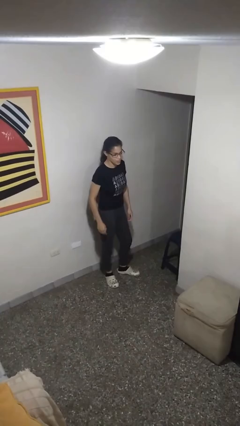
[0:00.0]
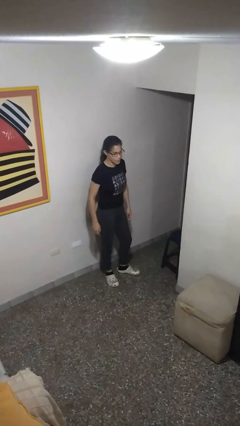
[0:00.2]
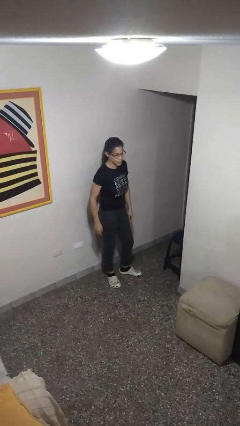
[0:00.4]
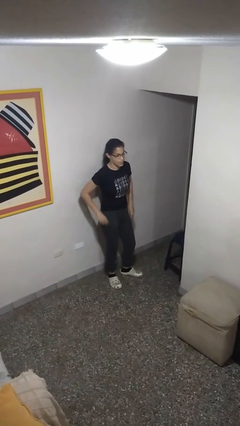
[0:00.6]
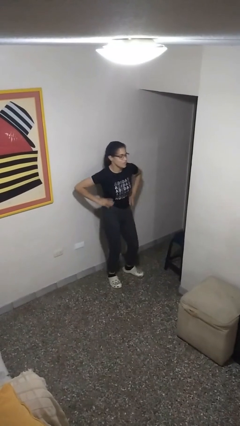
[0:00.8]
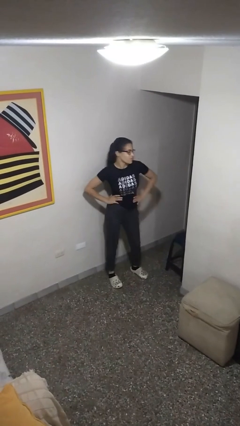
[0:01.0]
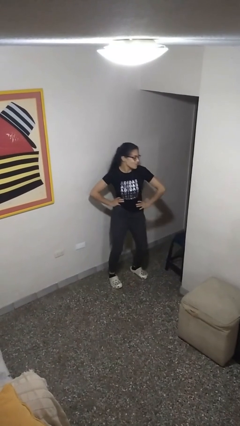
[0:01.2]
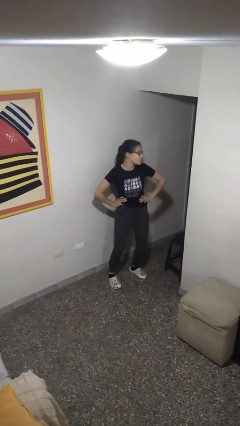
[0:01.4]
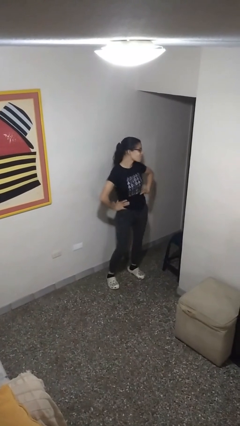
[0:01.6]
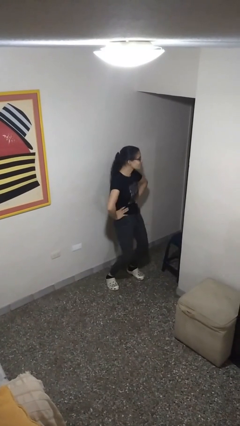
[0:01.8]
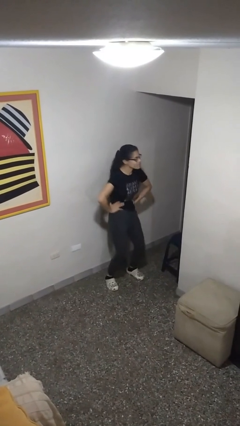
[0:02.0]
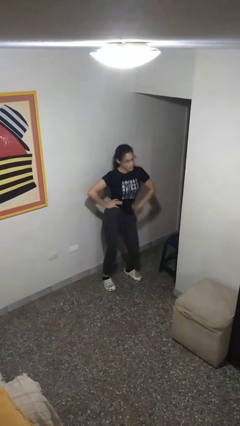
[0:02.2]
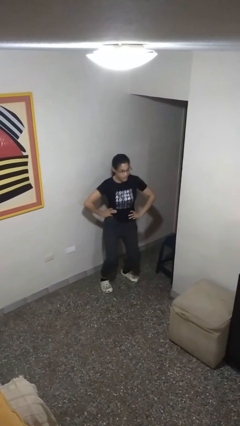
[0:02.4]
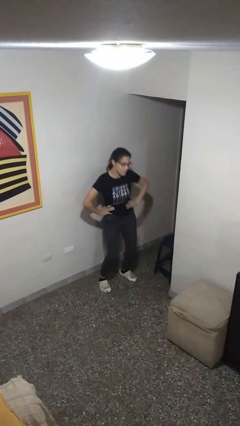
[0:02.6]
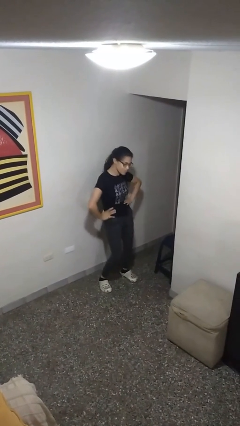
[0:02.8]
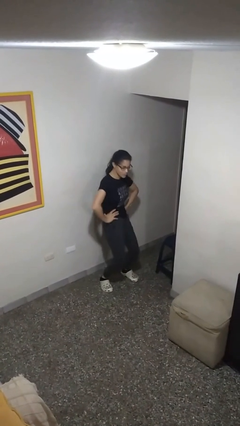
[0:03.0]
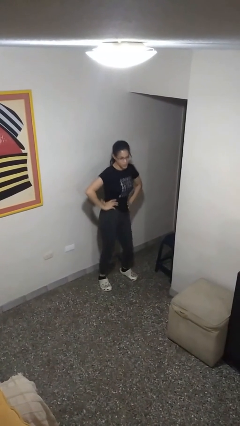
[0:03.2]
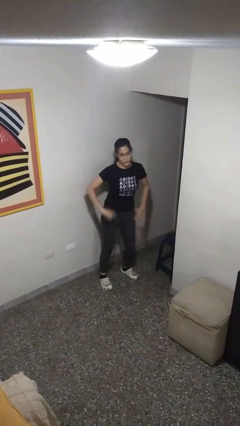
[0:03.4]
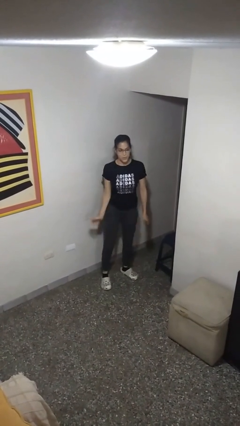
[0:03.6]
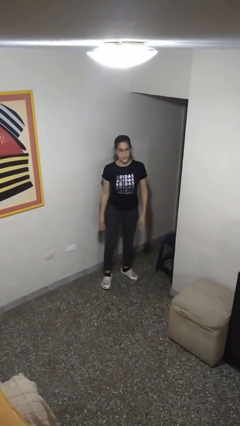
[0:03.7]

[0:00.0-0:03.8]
person dances in place

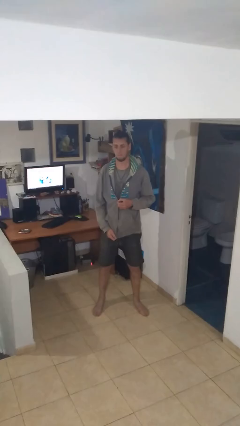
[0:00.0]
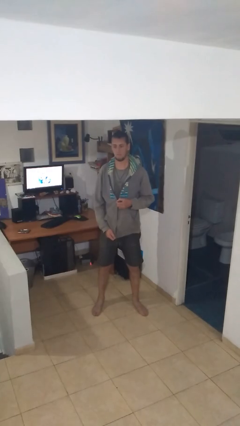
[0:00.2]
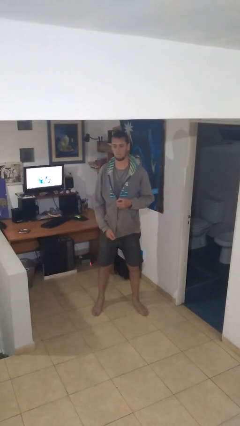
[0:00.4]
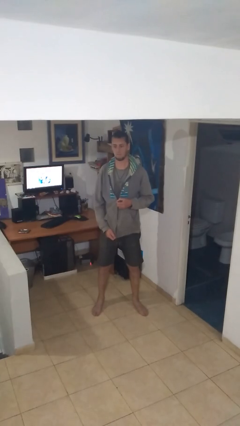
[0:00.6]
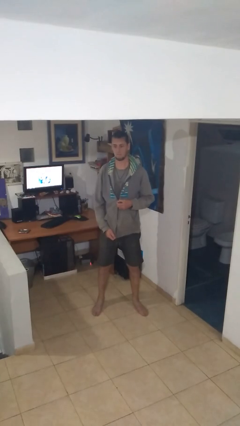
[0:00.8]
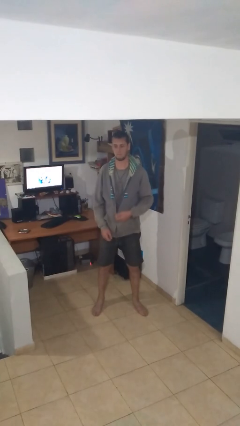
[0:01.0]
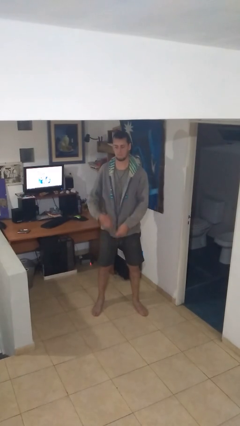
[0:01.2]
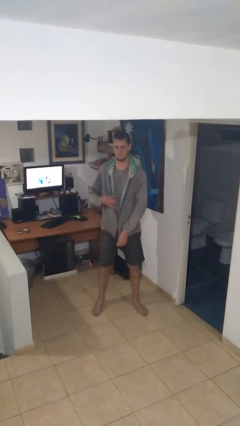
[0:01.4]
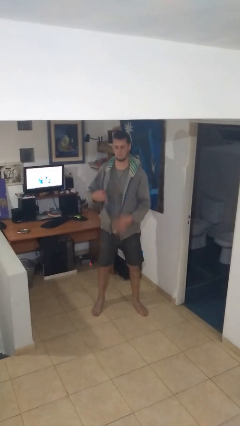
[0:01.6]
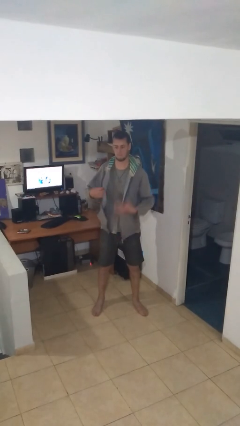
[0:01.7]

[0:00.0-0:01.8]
person unzips jacket

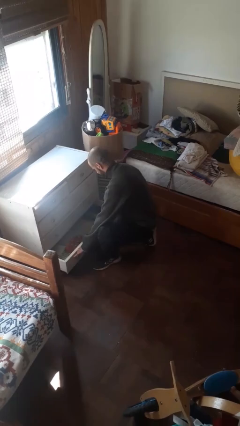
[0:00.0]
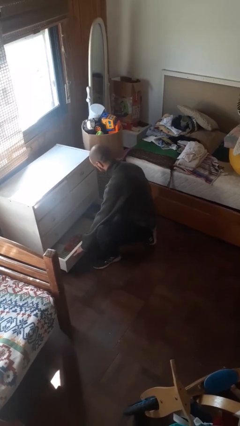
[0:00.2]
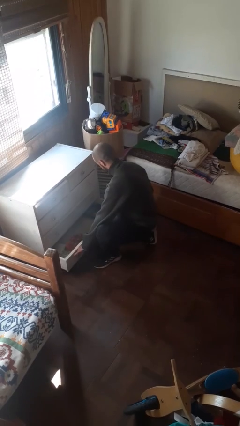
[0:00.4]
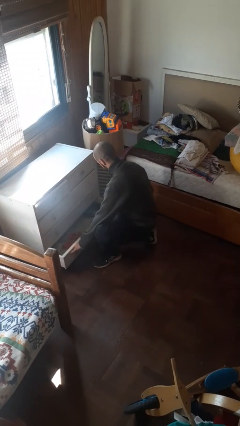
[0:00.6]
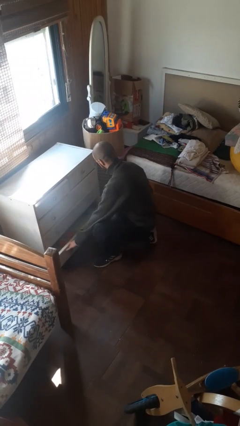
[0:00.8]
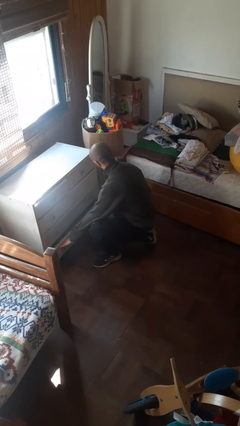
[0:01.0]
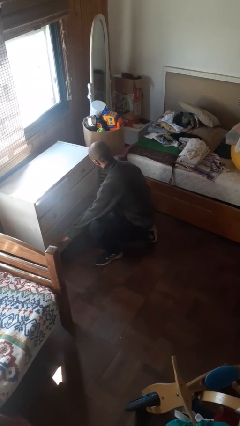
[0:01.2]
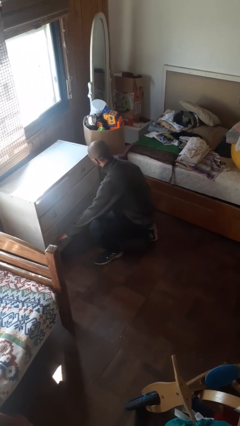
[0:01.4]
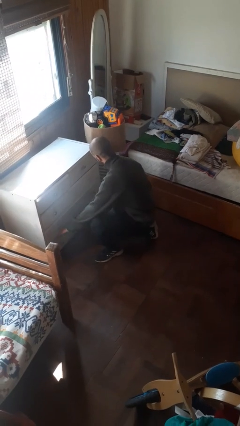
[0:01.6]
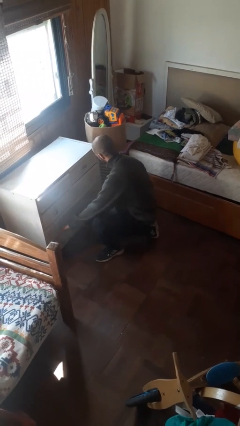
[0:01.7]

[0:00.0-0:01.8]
person closes dresser drawer

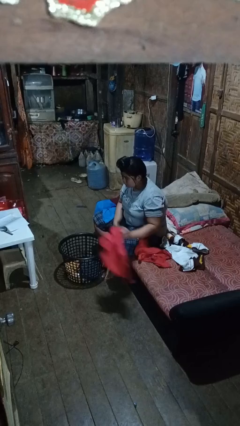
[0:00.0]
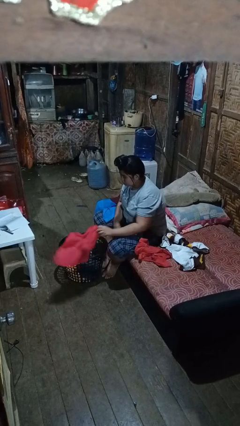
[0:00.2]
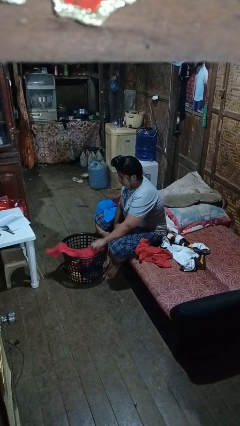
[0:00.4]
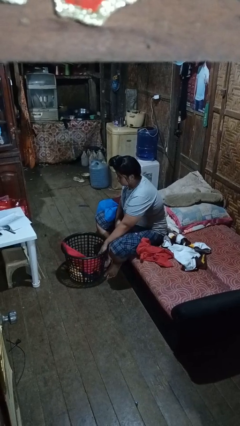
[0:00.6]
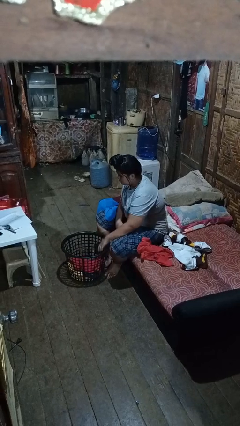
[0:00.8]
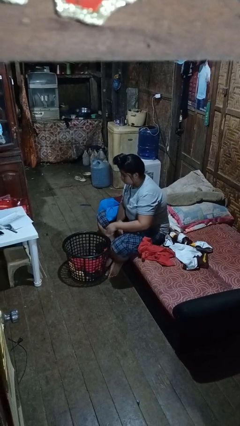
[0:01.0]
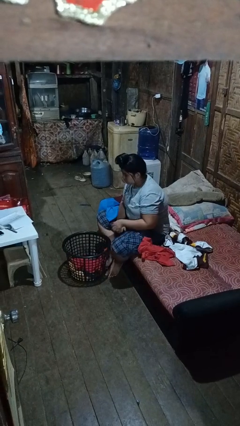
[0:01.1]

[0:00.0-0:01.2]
person puts object into basket

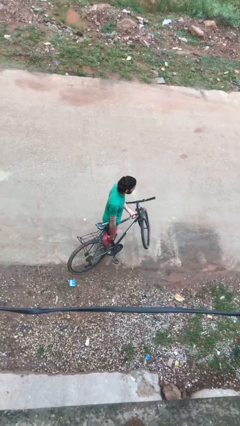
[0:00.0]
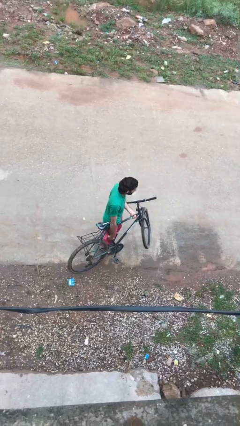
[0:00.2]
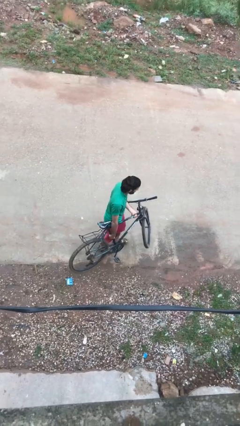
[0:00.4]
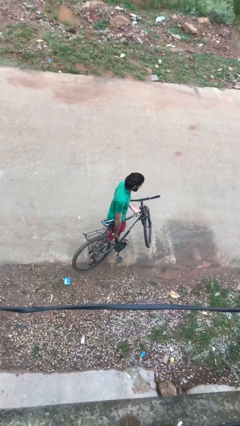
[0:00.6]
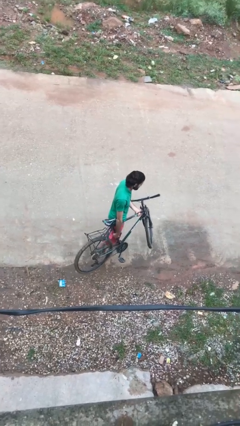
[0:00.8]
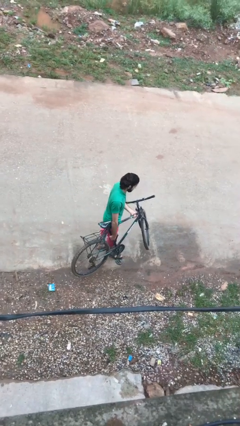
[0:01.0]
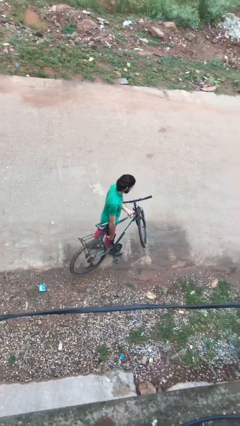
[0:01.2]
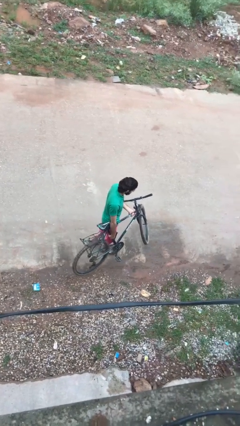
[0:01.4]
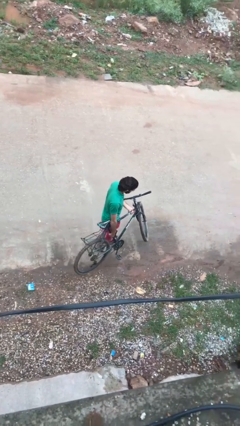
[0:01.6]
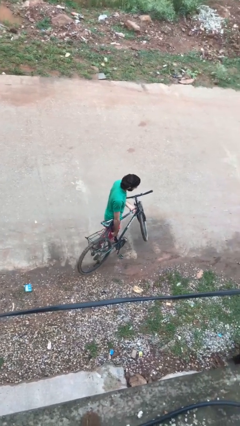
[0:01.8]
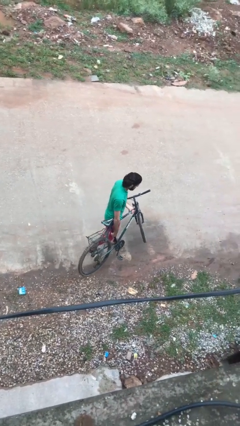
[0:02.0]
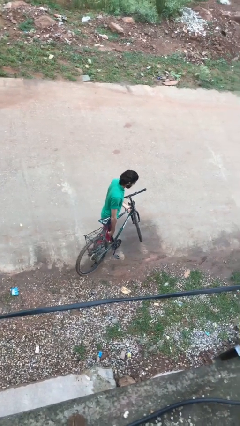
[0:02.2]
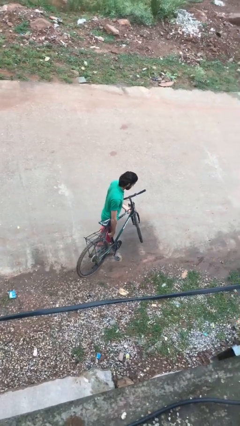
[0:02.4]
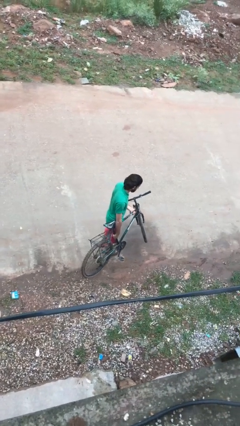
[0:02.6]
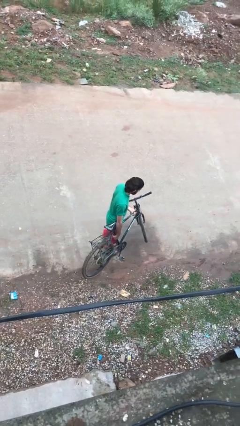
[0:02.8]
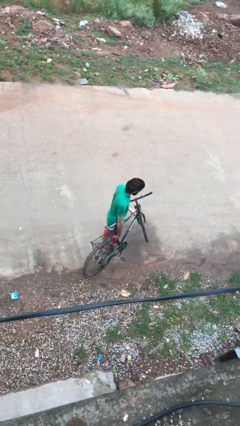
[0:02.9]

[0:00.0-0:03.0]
person carries bicycle

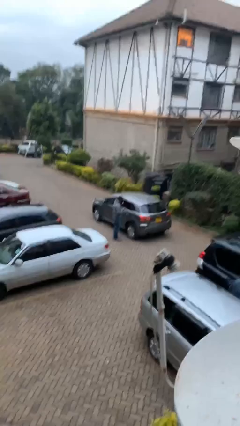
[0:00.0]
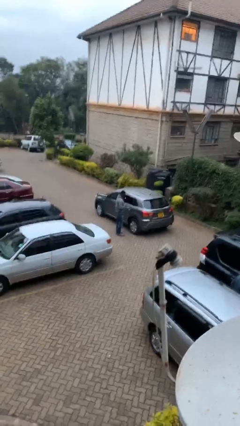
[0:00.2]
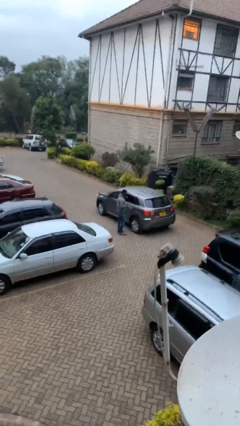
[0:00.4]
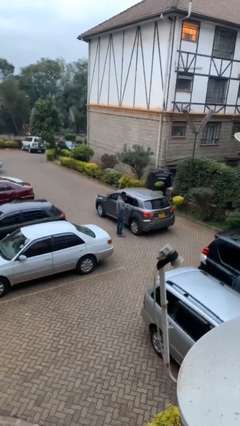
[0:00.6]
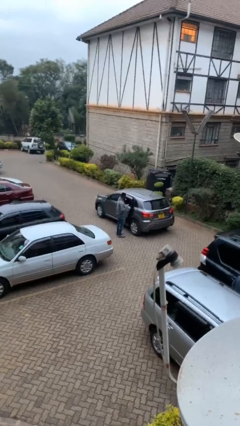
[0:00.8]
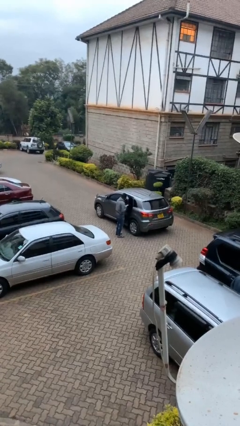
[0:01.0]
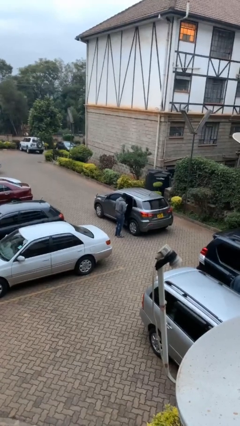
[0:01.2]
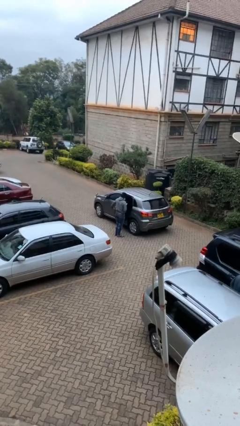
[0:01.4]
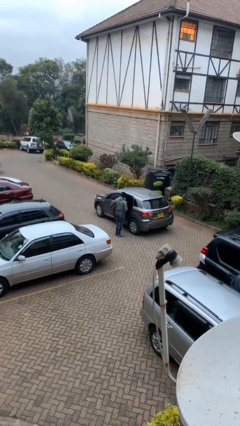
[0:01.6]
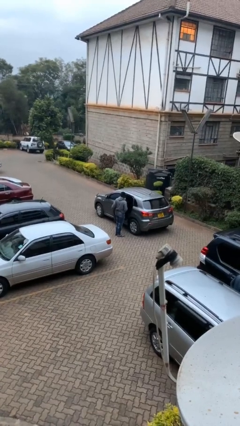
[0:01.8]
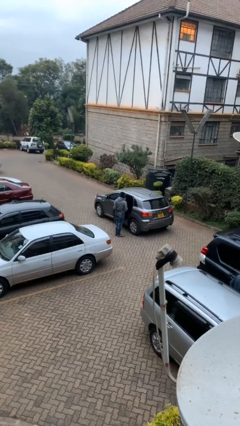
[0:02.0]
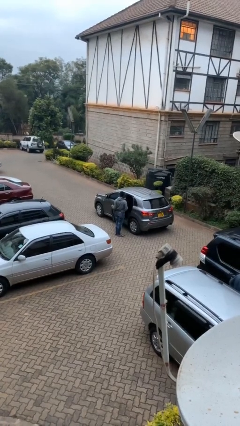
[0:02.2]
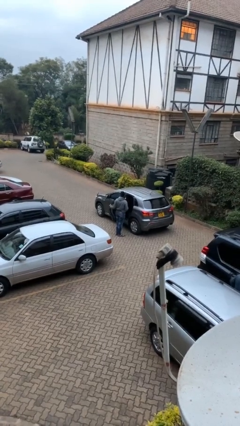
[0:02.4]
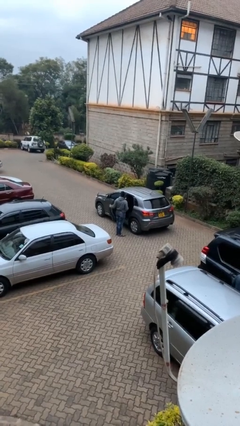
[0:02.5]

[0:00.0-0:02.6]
person opens car door

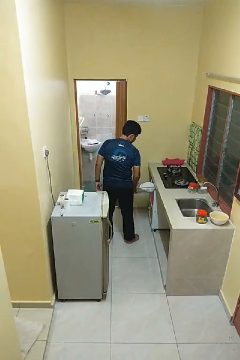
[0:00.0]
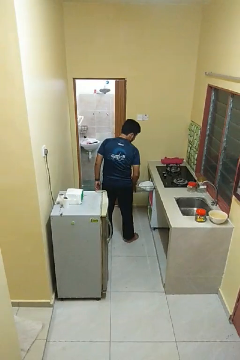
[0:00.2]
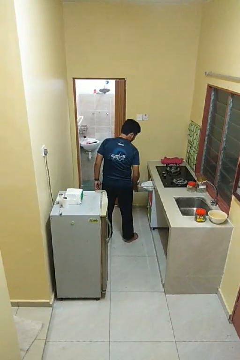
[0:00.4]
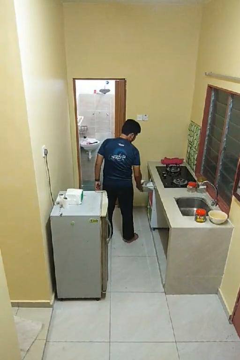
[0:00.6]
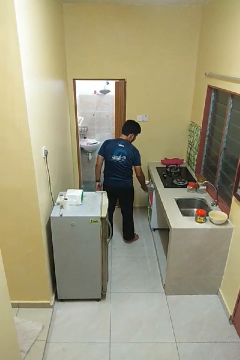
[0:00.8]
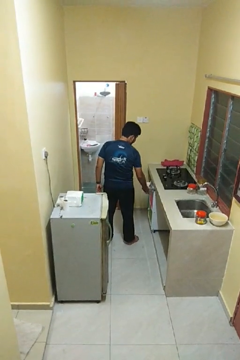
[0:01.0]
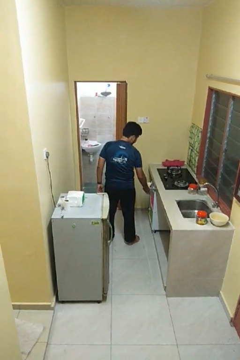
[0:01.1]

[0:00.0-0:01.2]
person closes kitchen drawer

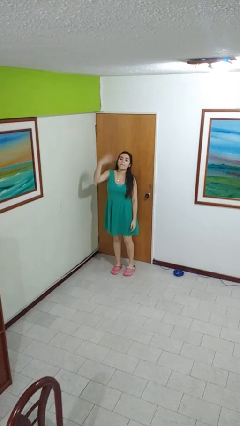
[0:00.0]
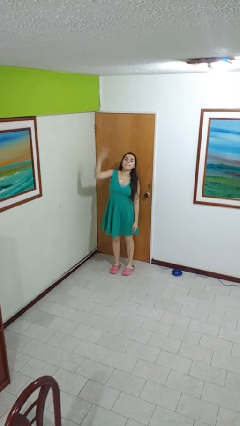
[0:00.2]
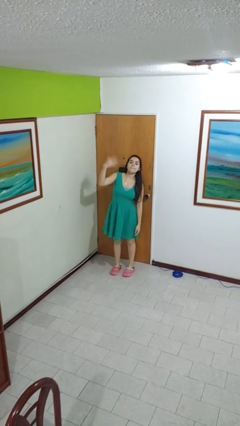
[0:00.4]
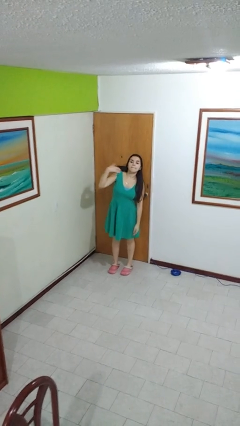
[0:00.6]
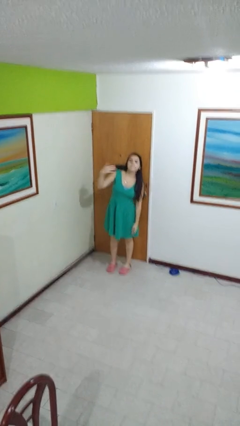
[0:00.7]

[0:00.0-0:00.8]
person gestures come here

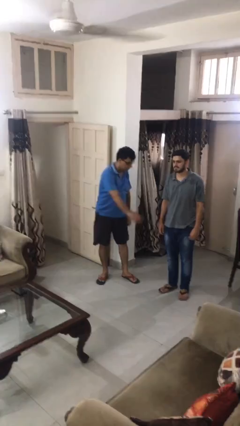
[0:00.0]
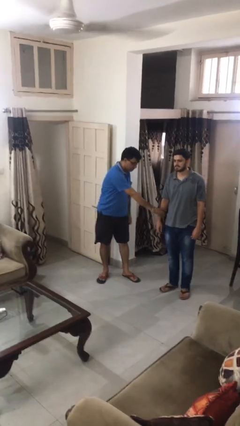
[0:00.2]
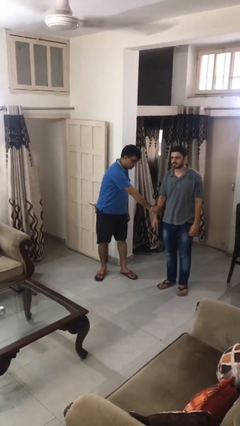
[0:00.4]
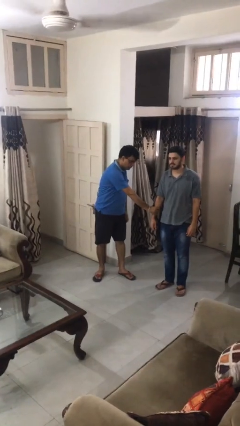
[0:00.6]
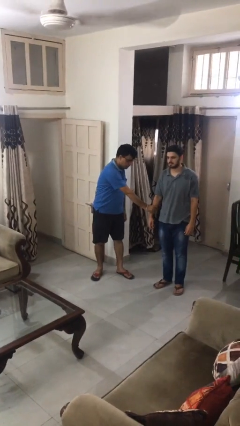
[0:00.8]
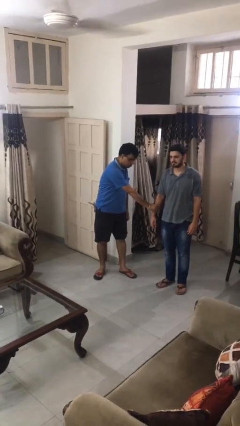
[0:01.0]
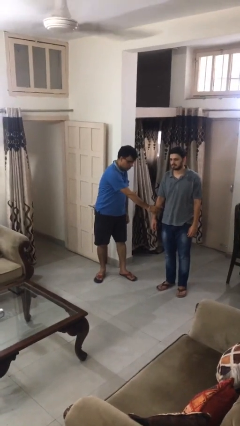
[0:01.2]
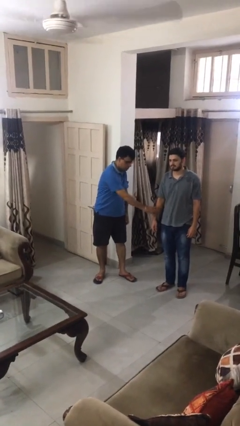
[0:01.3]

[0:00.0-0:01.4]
person grabs person by forearm
